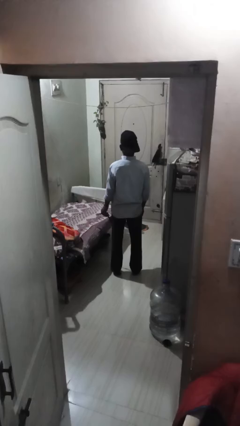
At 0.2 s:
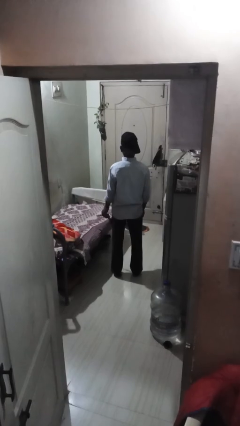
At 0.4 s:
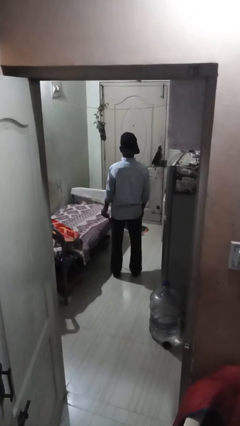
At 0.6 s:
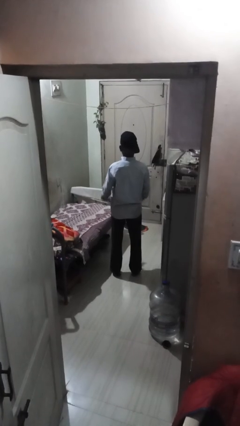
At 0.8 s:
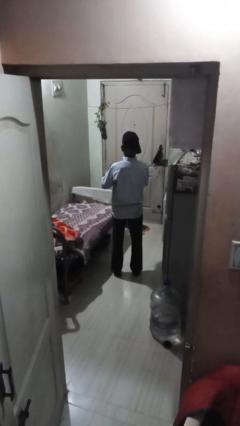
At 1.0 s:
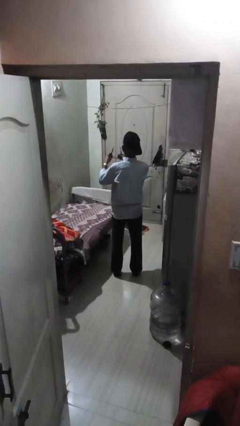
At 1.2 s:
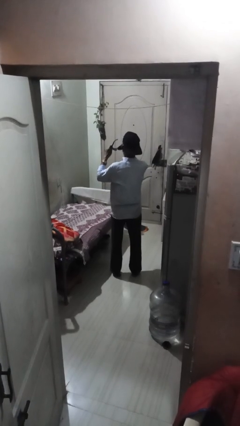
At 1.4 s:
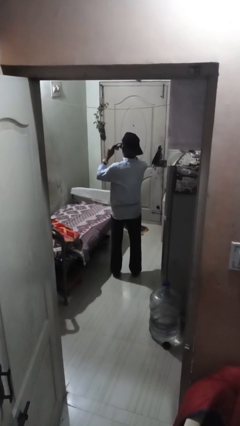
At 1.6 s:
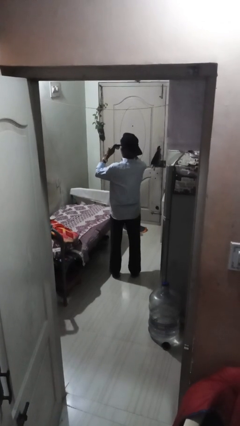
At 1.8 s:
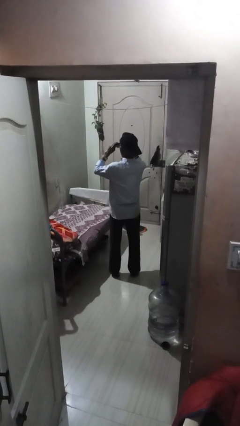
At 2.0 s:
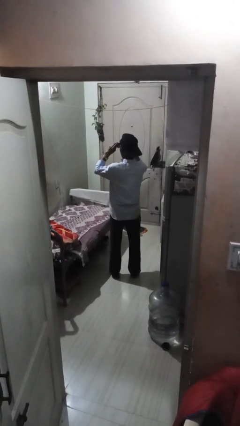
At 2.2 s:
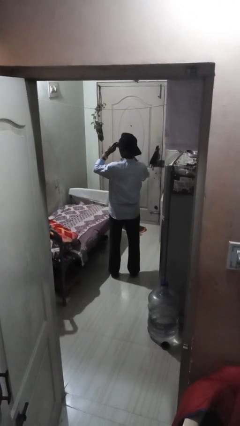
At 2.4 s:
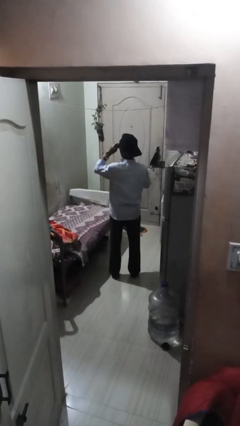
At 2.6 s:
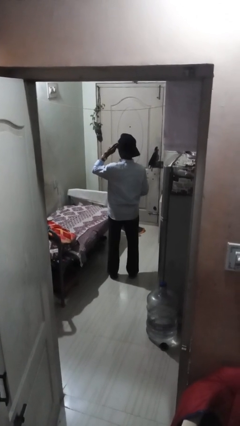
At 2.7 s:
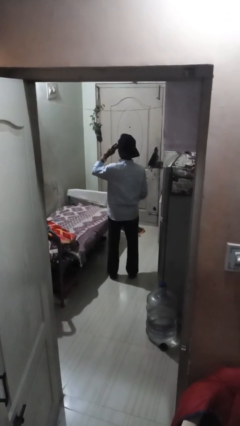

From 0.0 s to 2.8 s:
person puts on sunglasses

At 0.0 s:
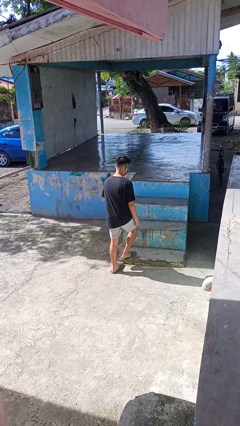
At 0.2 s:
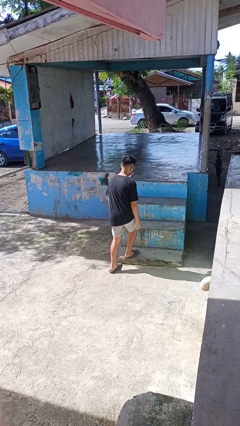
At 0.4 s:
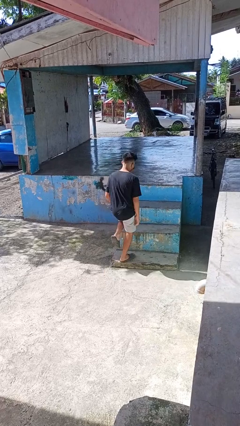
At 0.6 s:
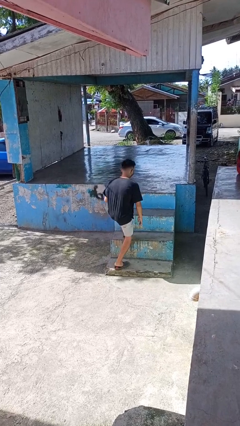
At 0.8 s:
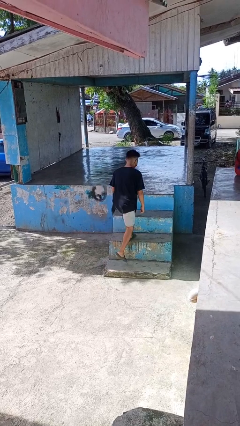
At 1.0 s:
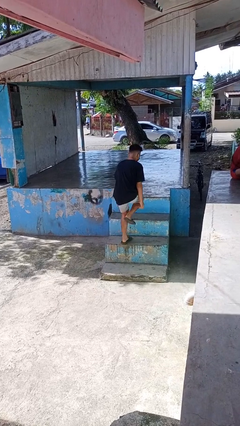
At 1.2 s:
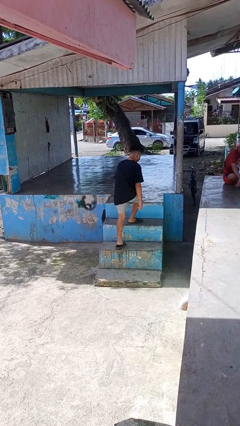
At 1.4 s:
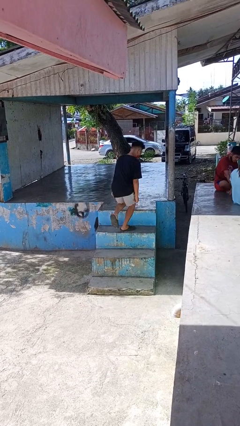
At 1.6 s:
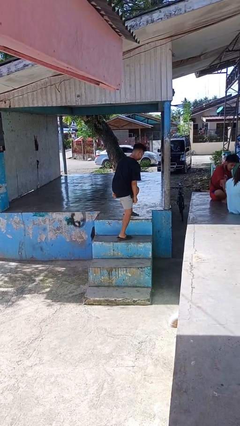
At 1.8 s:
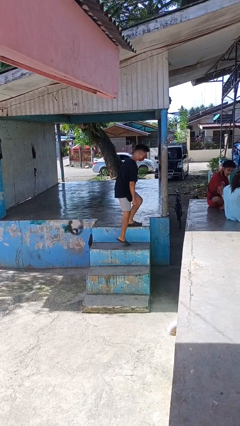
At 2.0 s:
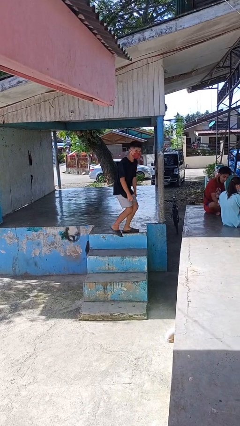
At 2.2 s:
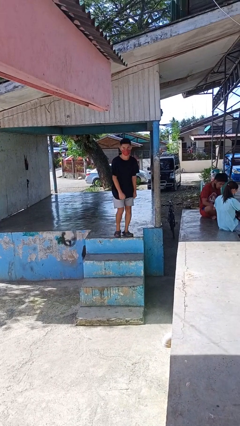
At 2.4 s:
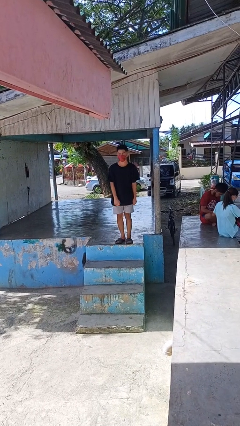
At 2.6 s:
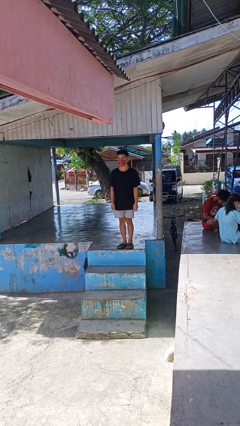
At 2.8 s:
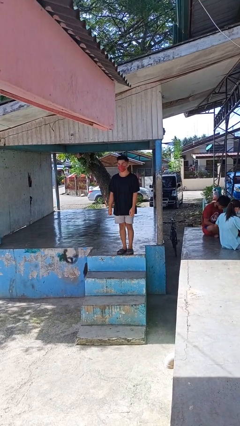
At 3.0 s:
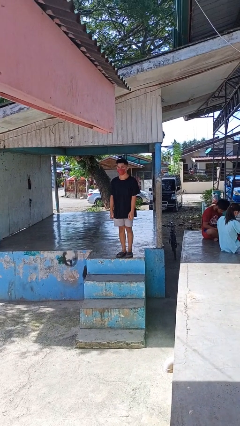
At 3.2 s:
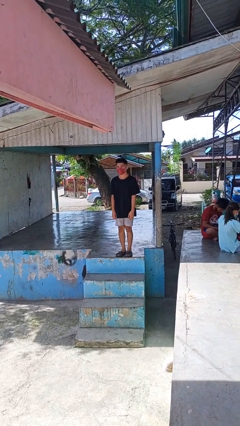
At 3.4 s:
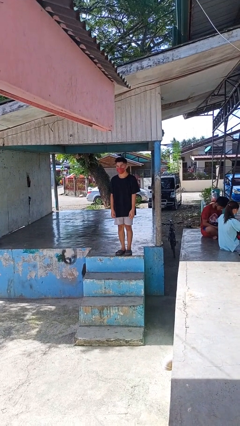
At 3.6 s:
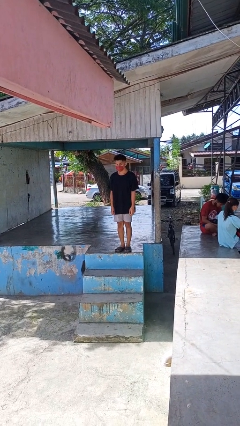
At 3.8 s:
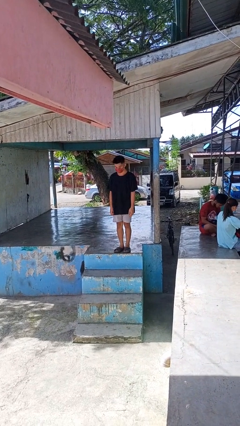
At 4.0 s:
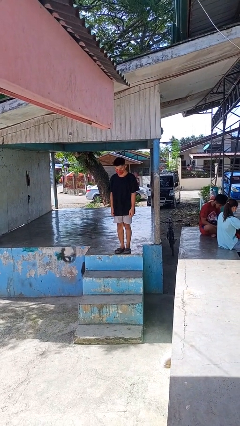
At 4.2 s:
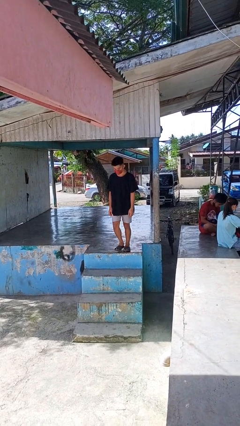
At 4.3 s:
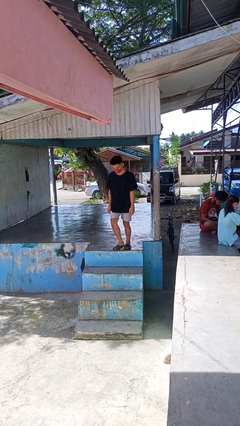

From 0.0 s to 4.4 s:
person climbs up stairs

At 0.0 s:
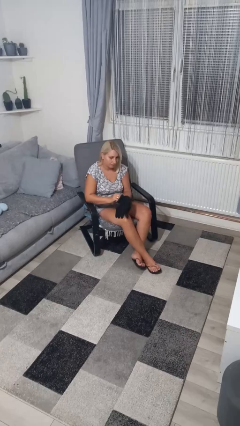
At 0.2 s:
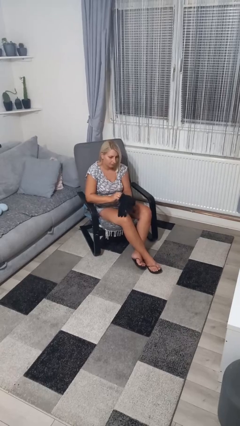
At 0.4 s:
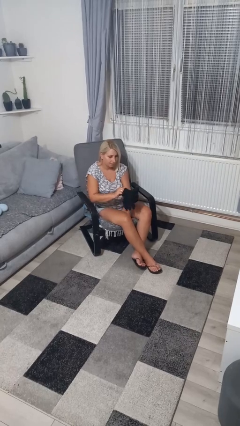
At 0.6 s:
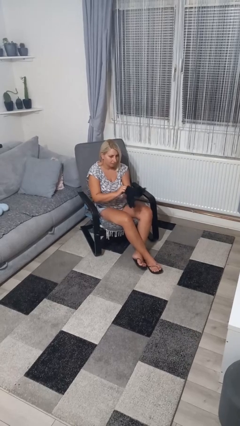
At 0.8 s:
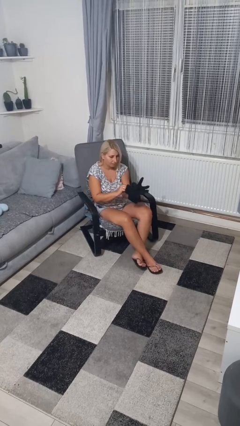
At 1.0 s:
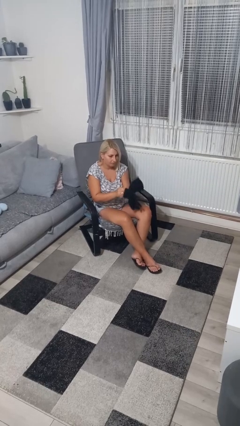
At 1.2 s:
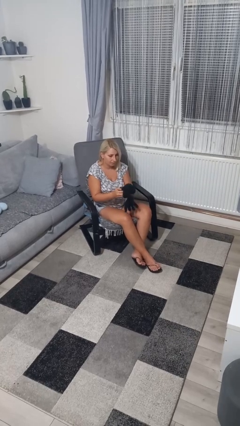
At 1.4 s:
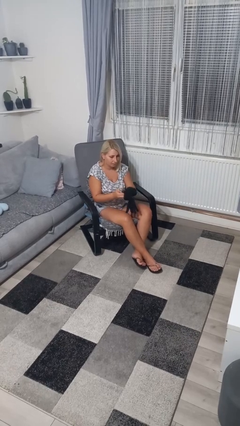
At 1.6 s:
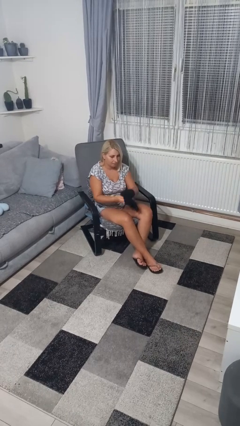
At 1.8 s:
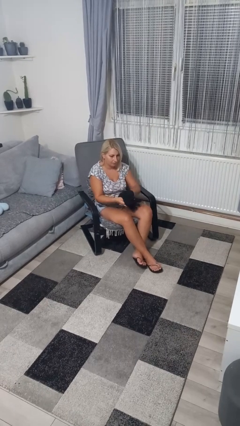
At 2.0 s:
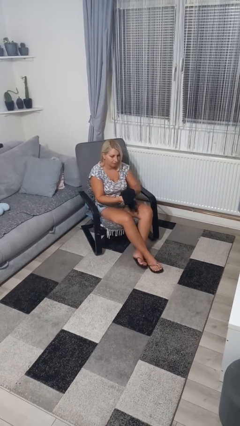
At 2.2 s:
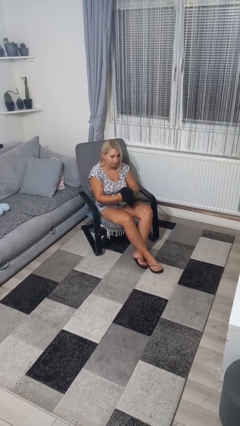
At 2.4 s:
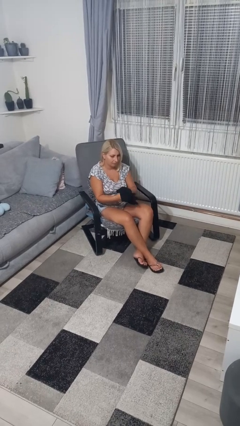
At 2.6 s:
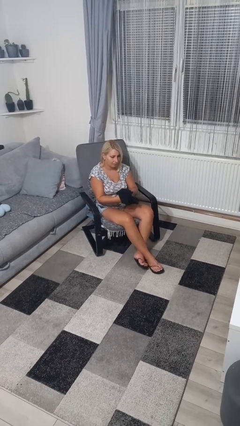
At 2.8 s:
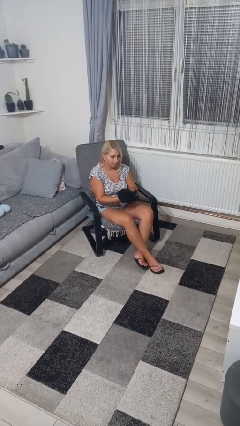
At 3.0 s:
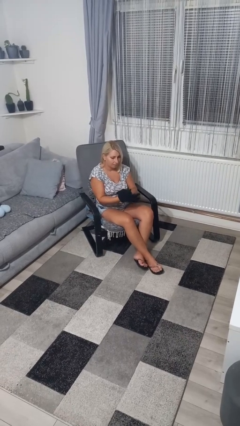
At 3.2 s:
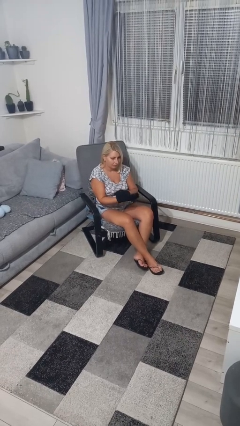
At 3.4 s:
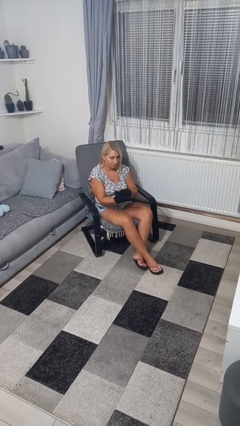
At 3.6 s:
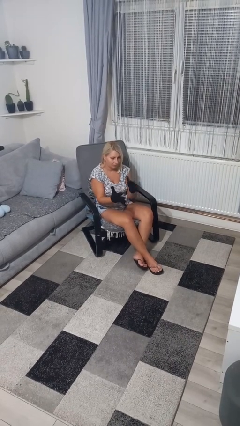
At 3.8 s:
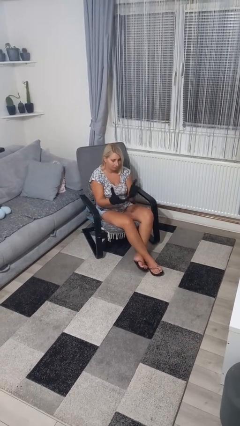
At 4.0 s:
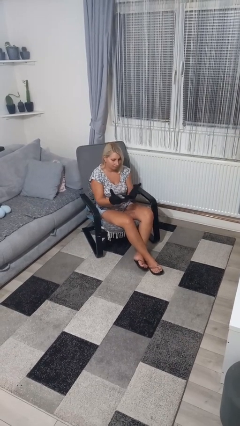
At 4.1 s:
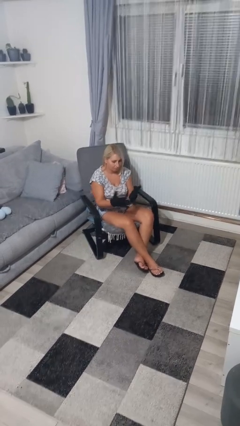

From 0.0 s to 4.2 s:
person puts on gloves

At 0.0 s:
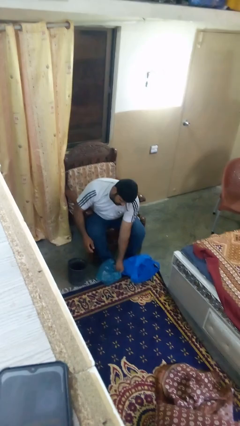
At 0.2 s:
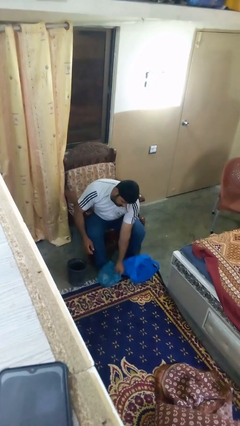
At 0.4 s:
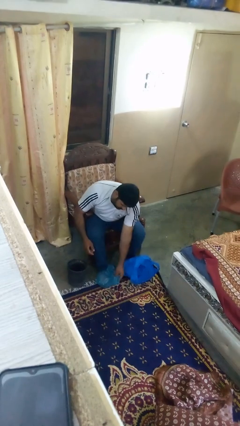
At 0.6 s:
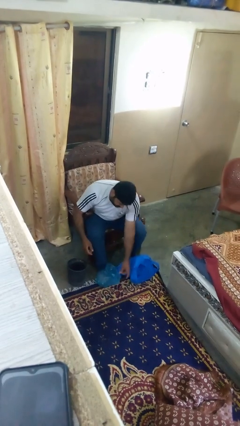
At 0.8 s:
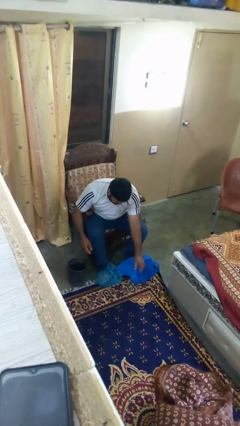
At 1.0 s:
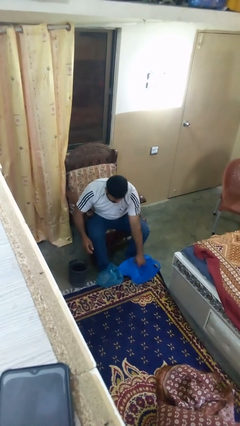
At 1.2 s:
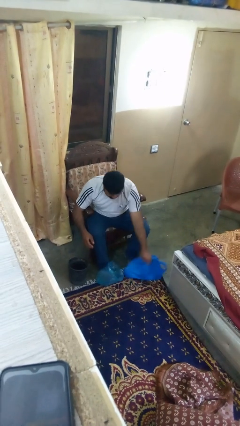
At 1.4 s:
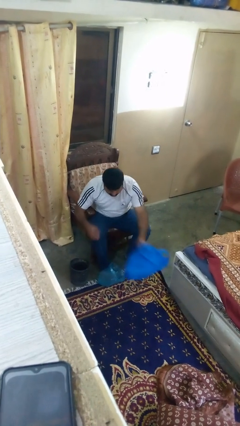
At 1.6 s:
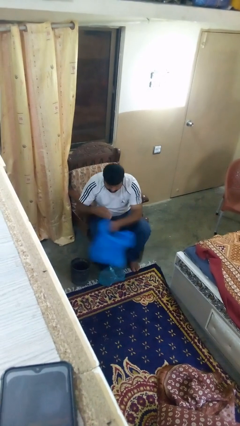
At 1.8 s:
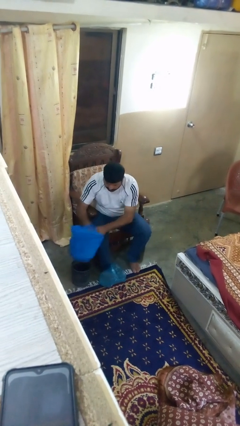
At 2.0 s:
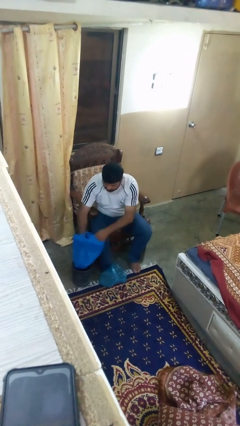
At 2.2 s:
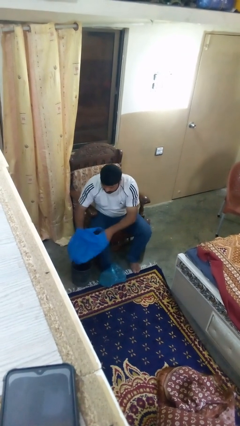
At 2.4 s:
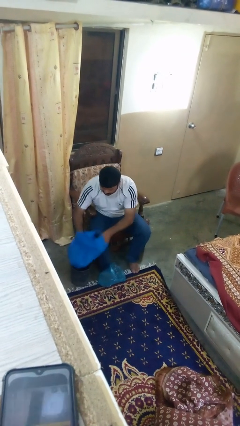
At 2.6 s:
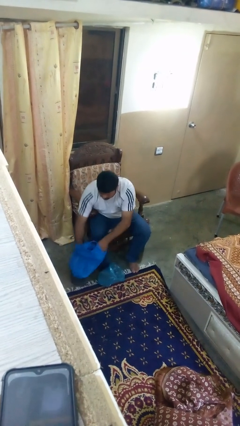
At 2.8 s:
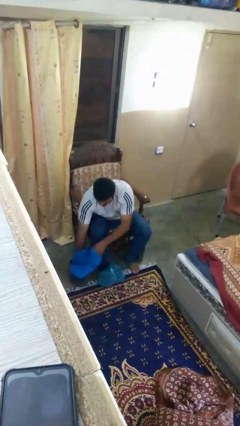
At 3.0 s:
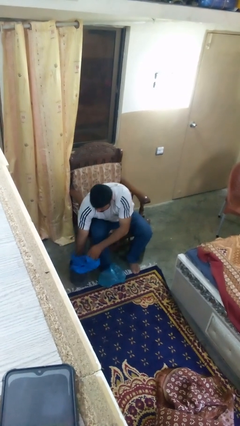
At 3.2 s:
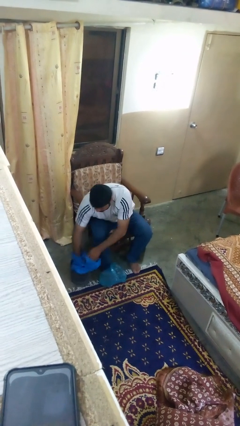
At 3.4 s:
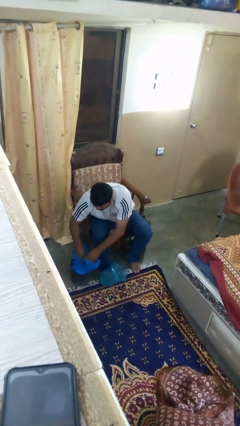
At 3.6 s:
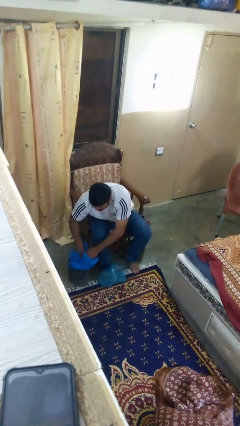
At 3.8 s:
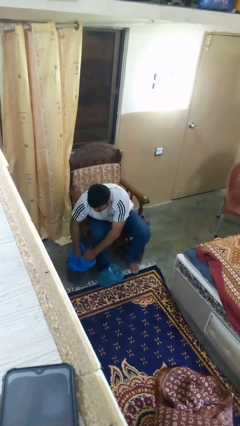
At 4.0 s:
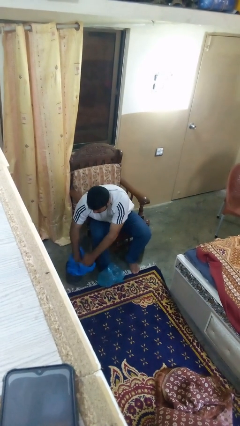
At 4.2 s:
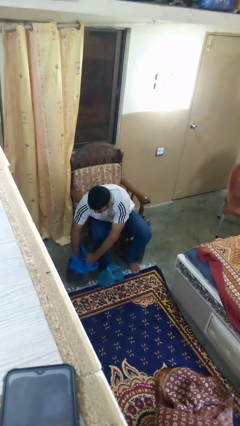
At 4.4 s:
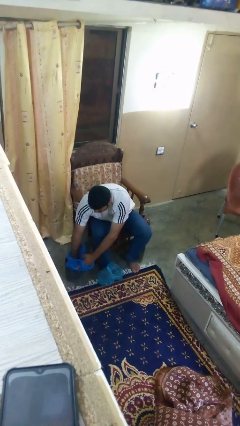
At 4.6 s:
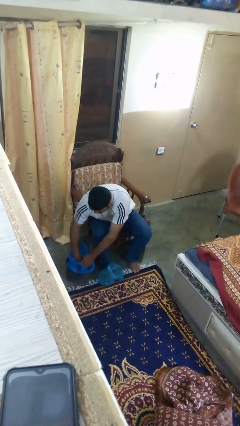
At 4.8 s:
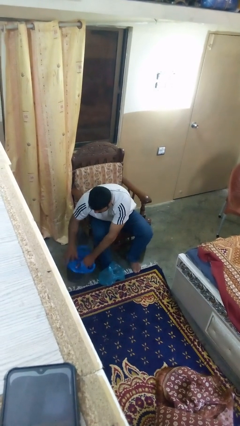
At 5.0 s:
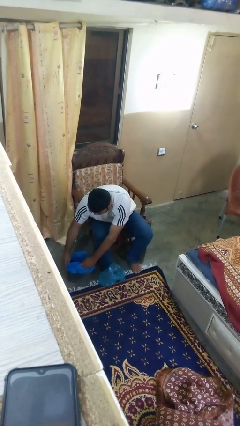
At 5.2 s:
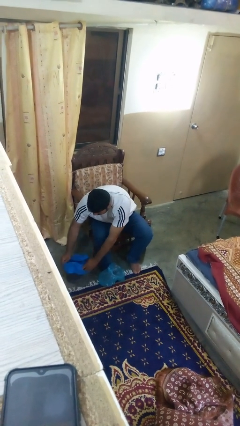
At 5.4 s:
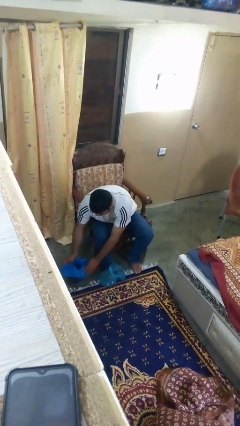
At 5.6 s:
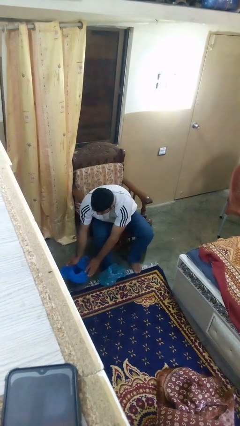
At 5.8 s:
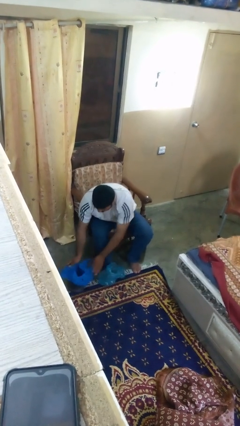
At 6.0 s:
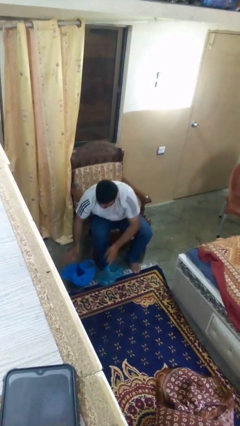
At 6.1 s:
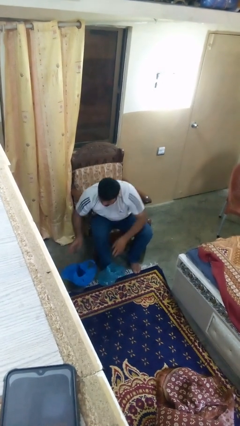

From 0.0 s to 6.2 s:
person inserts trashbag into trashcan
